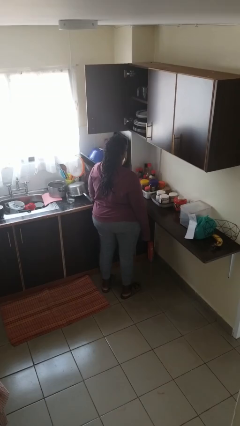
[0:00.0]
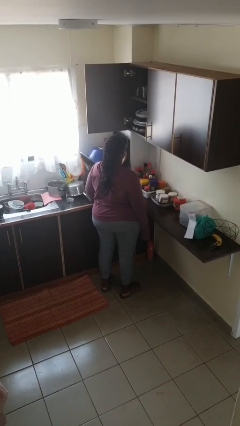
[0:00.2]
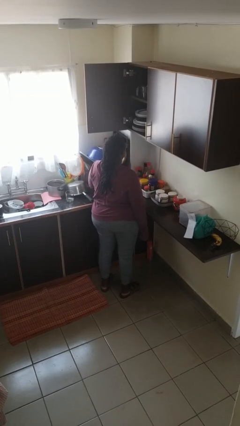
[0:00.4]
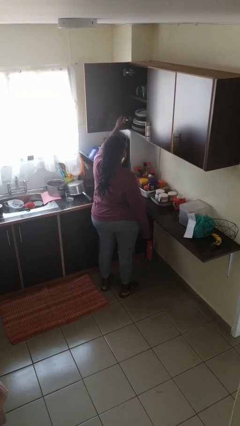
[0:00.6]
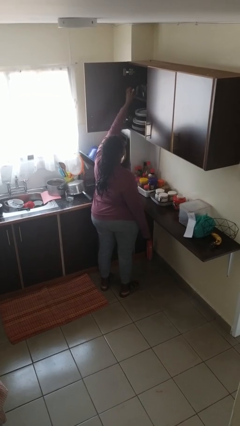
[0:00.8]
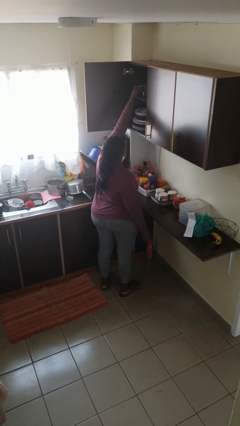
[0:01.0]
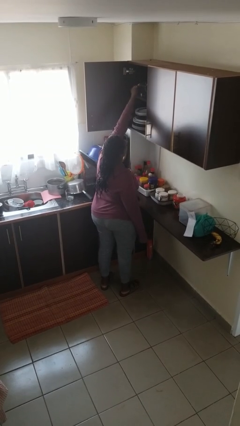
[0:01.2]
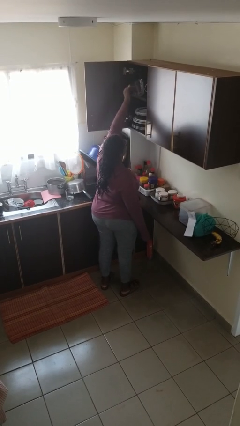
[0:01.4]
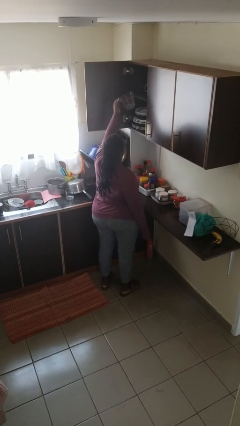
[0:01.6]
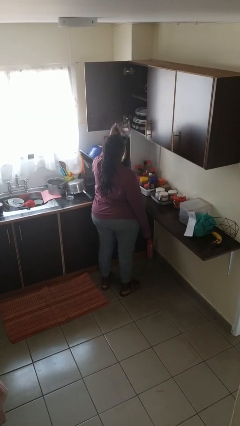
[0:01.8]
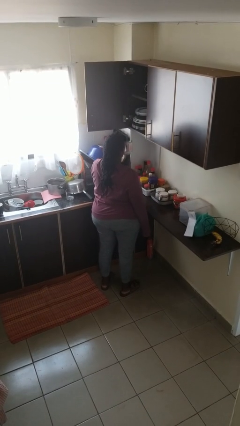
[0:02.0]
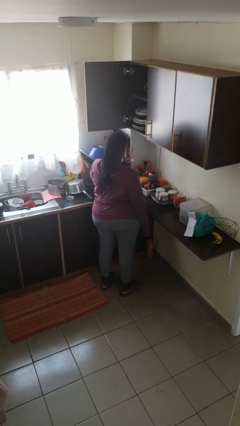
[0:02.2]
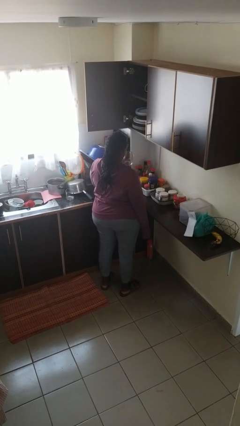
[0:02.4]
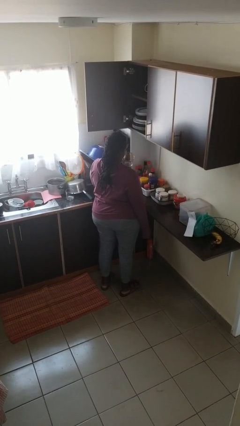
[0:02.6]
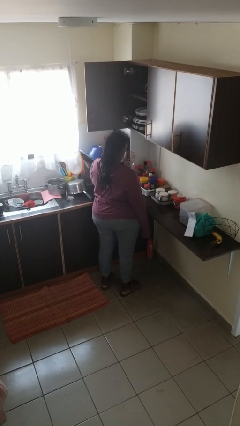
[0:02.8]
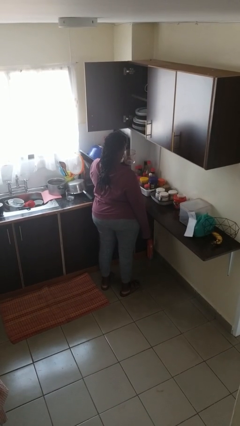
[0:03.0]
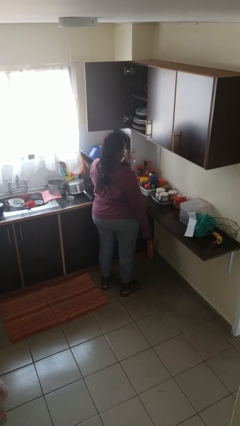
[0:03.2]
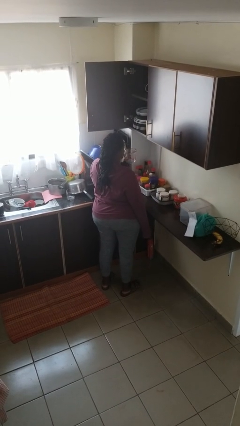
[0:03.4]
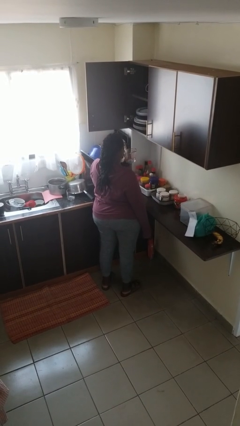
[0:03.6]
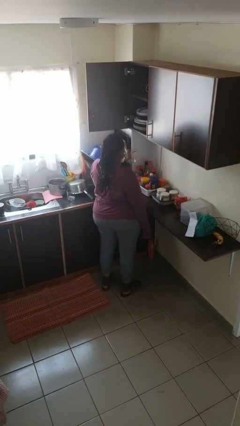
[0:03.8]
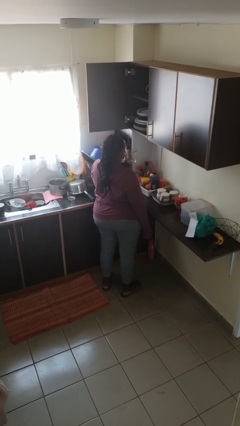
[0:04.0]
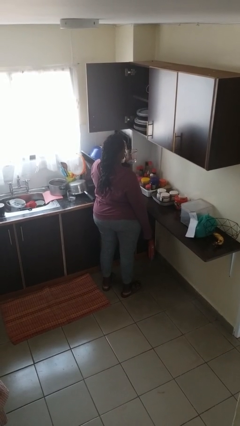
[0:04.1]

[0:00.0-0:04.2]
person picks up object from cabinet

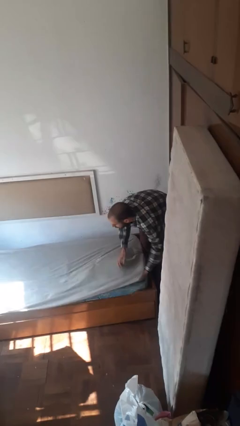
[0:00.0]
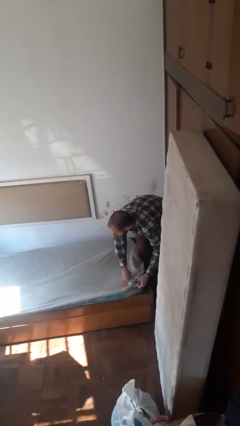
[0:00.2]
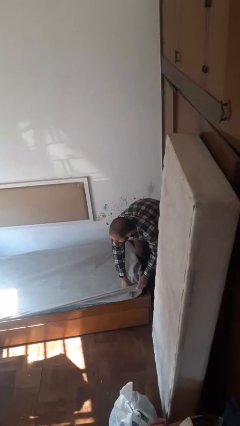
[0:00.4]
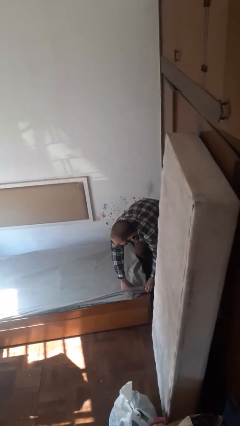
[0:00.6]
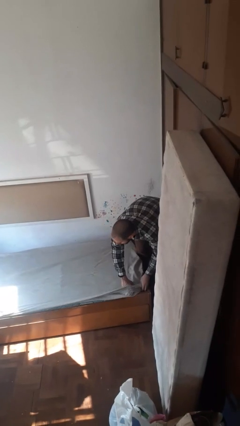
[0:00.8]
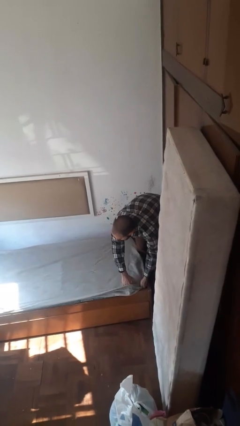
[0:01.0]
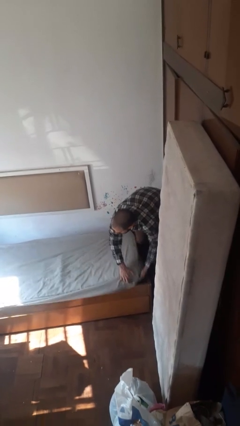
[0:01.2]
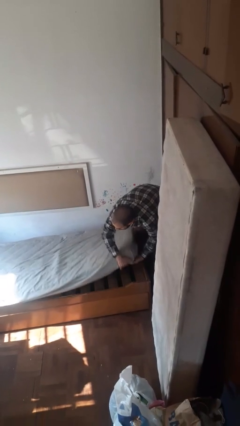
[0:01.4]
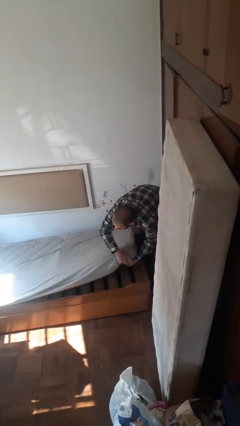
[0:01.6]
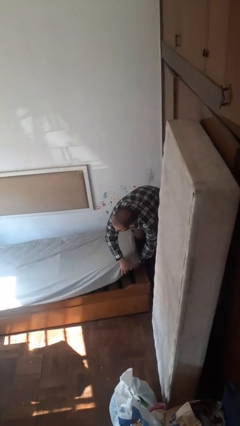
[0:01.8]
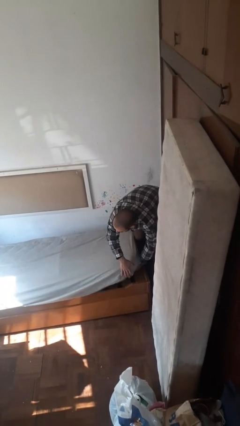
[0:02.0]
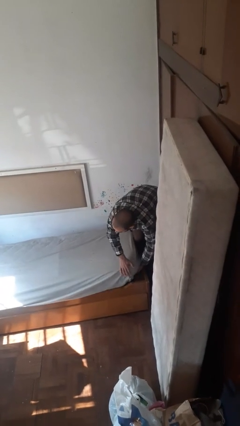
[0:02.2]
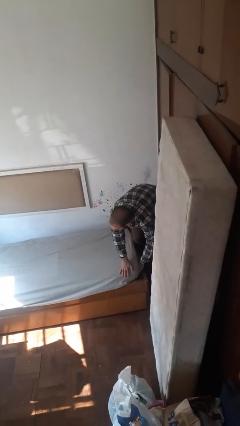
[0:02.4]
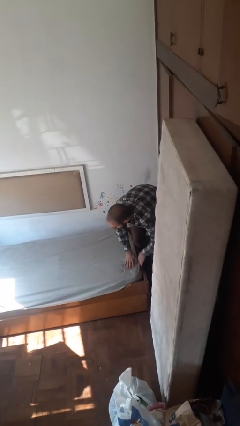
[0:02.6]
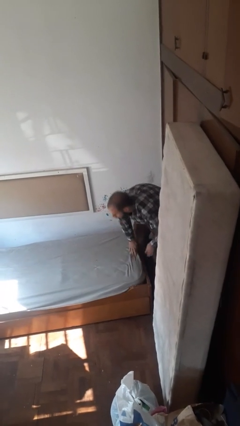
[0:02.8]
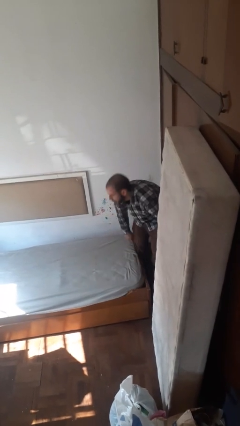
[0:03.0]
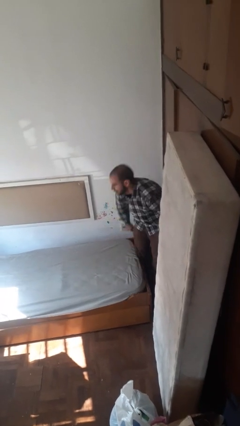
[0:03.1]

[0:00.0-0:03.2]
person makes bed

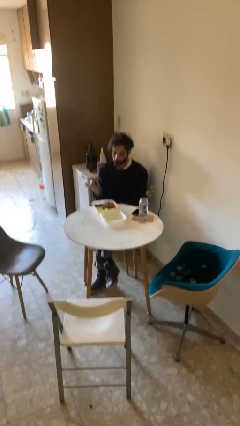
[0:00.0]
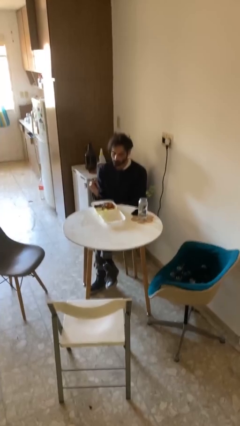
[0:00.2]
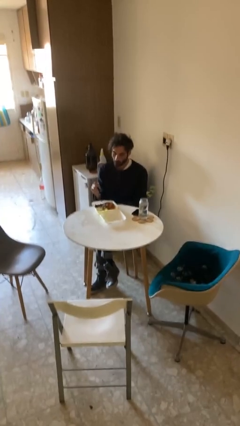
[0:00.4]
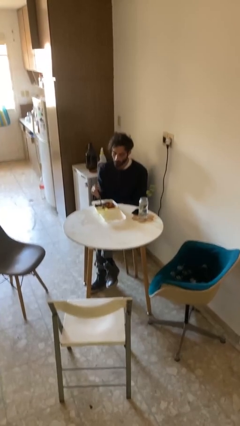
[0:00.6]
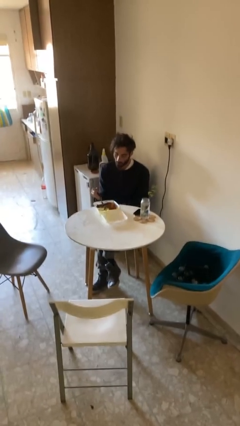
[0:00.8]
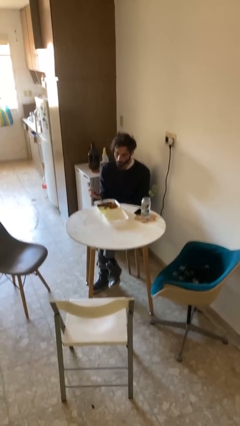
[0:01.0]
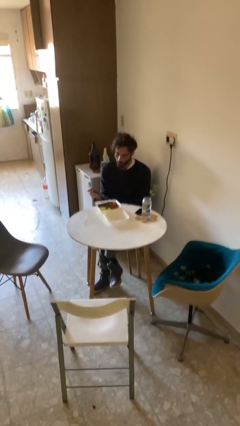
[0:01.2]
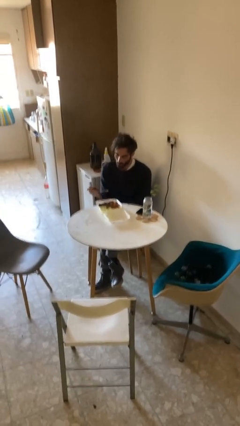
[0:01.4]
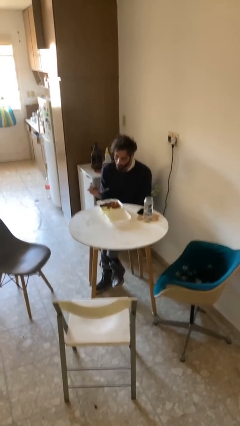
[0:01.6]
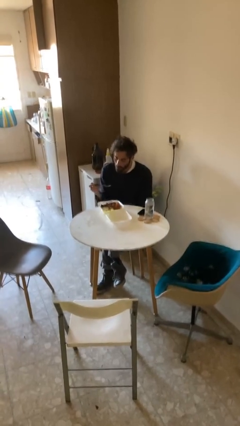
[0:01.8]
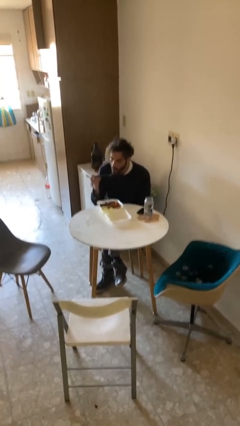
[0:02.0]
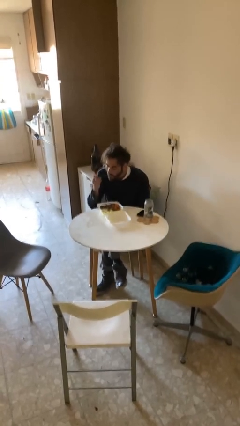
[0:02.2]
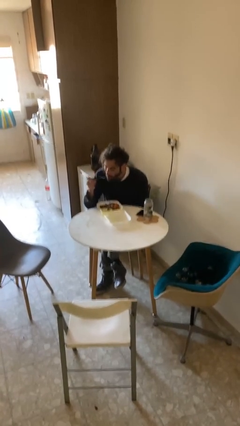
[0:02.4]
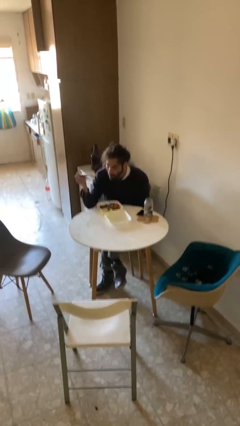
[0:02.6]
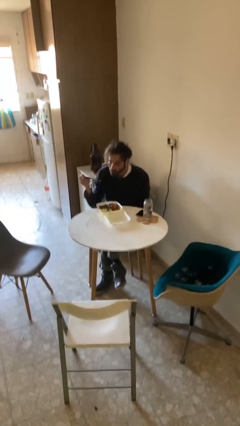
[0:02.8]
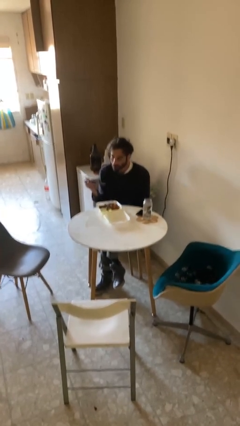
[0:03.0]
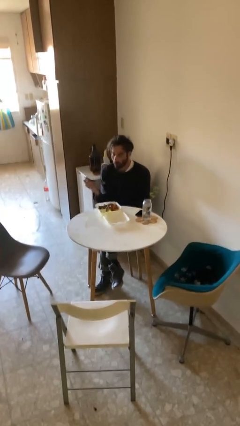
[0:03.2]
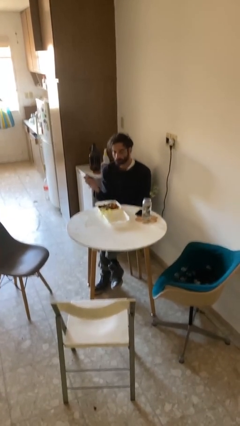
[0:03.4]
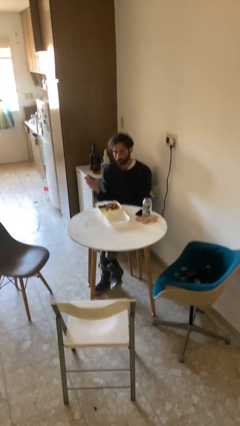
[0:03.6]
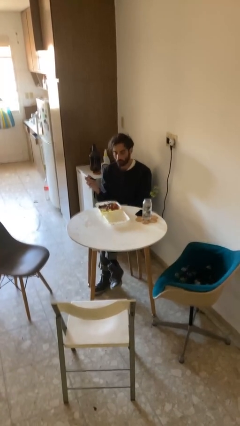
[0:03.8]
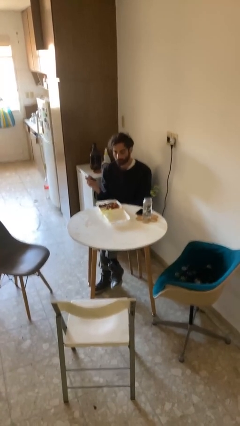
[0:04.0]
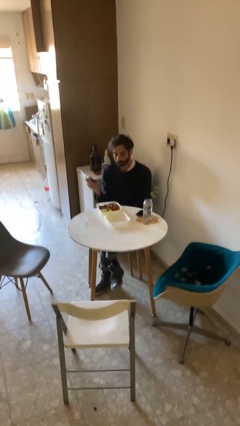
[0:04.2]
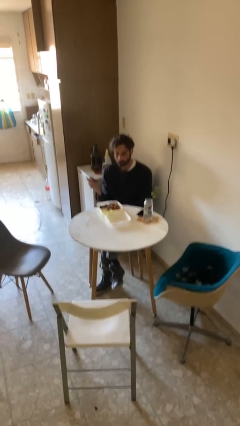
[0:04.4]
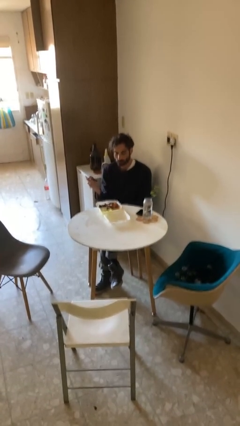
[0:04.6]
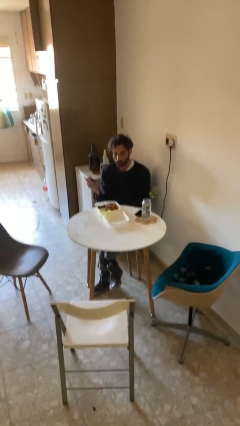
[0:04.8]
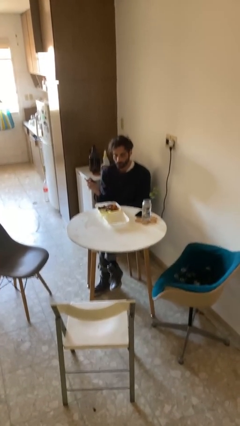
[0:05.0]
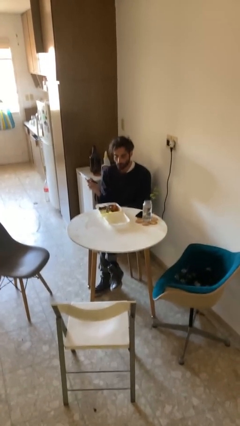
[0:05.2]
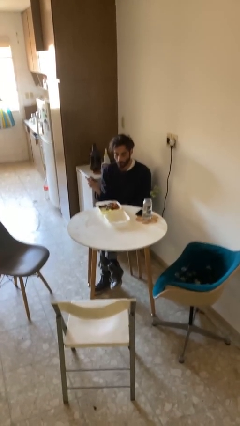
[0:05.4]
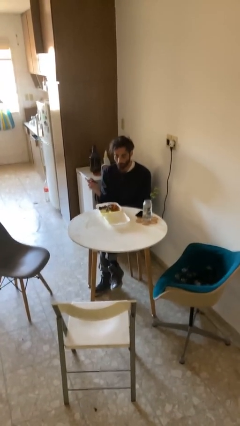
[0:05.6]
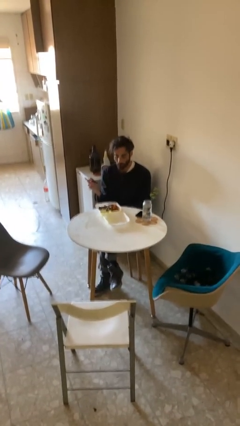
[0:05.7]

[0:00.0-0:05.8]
person eats with utensil

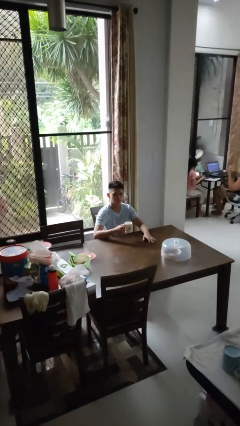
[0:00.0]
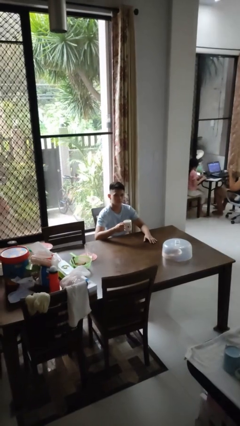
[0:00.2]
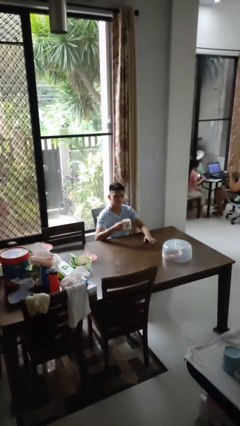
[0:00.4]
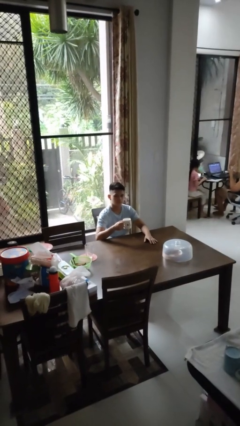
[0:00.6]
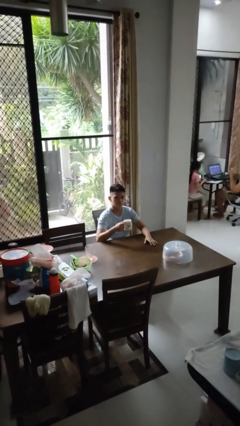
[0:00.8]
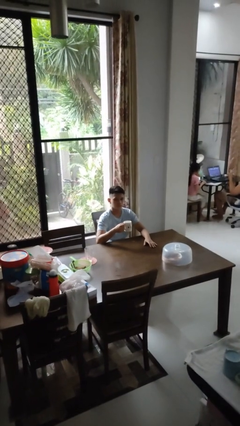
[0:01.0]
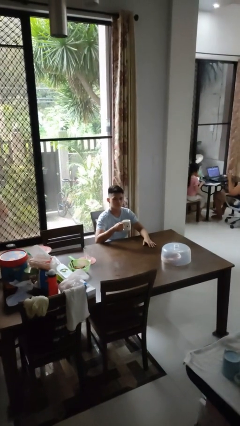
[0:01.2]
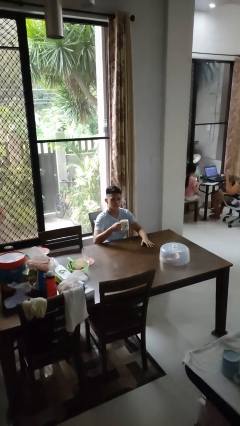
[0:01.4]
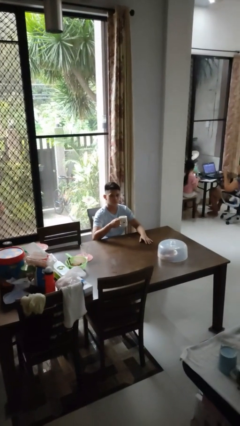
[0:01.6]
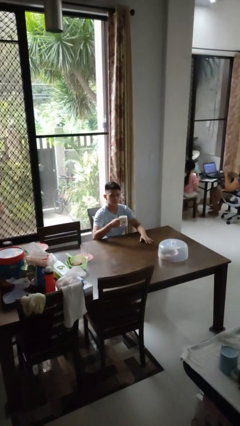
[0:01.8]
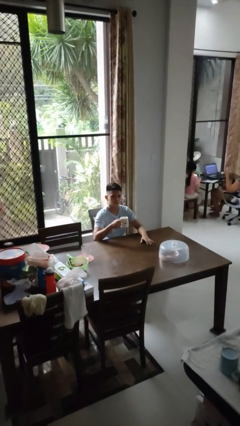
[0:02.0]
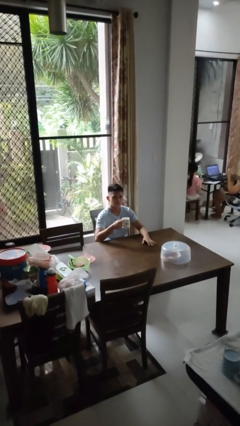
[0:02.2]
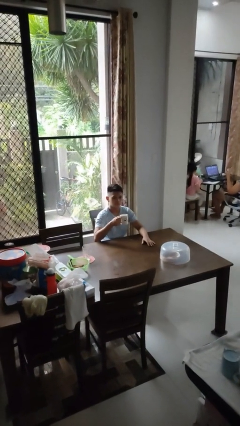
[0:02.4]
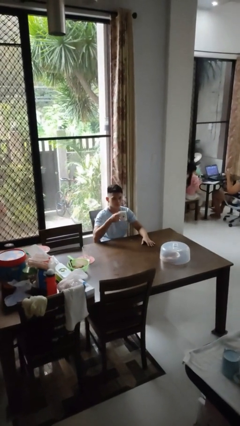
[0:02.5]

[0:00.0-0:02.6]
person picks up object from table

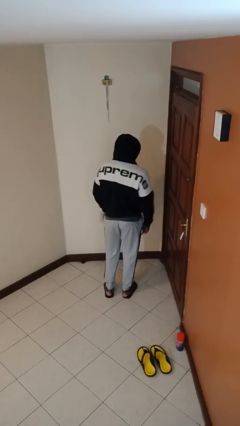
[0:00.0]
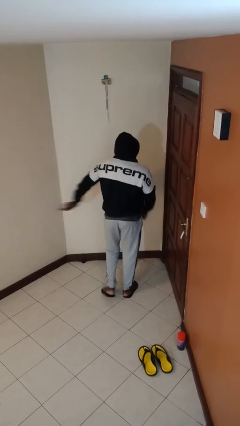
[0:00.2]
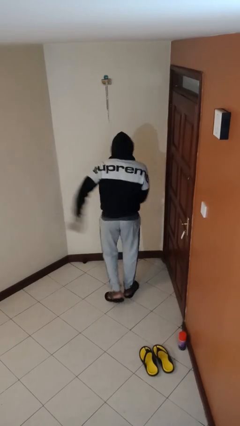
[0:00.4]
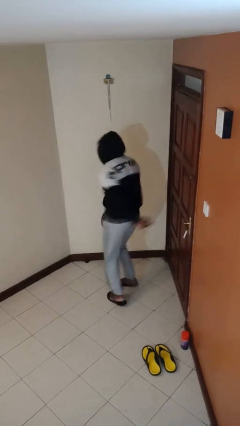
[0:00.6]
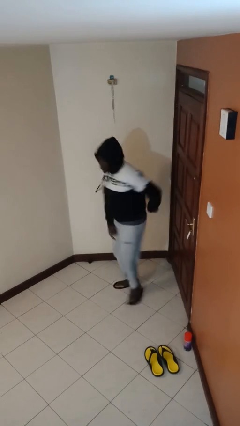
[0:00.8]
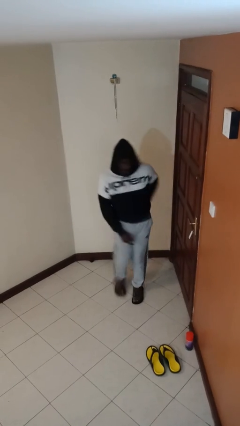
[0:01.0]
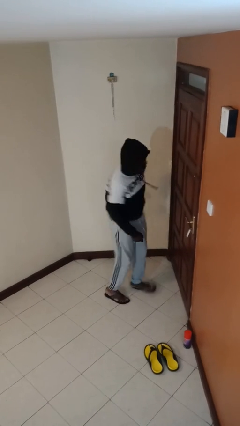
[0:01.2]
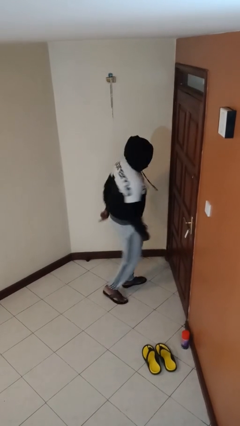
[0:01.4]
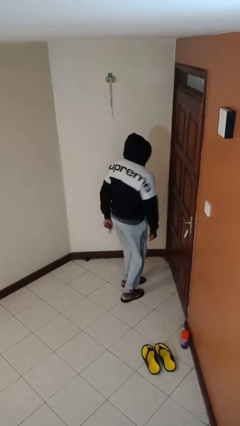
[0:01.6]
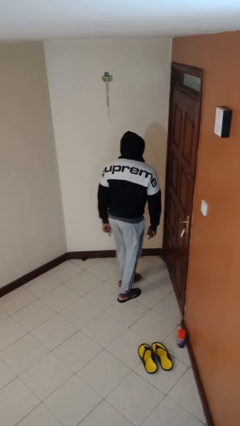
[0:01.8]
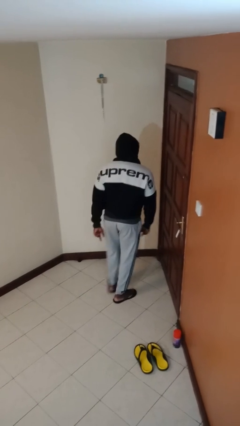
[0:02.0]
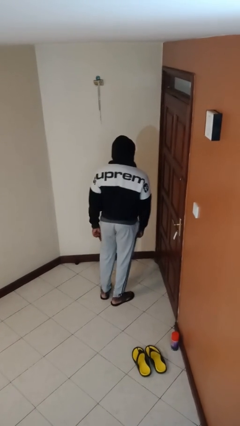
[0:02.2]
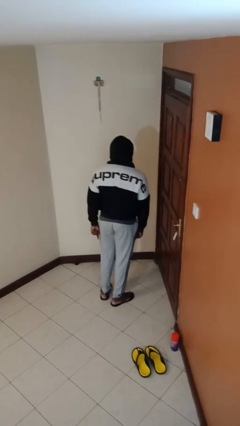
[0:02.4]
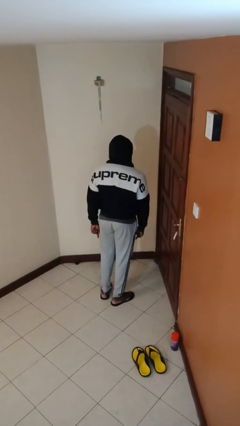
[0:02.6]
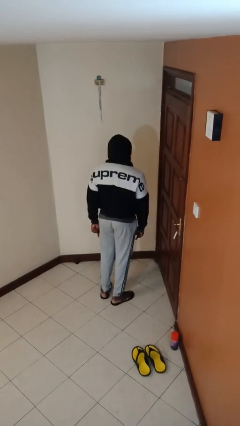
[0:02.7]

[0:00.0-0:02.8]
person twirls
